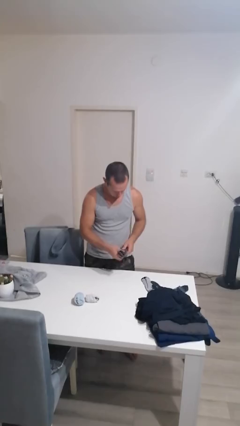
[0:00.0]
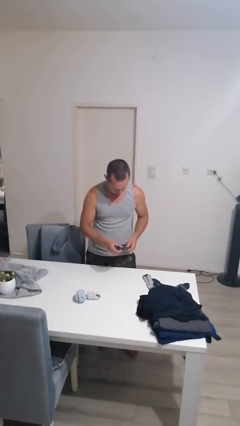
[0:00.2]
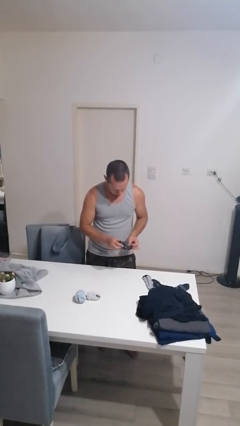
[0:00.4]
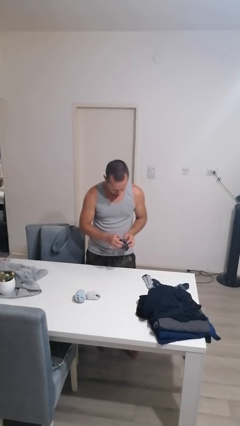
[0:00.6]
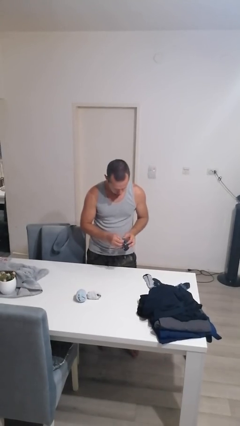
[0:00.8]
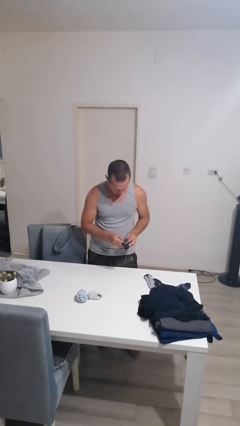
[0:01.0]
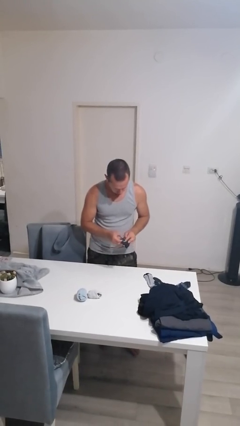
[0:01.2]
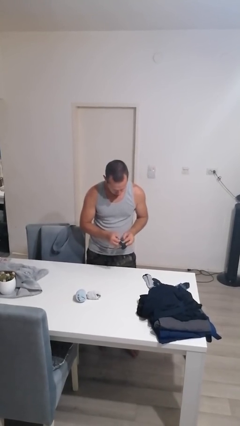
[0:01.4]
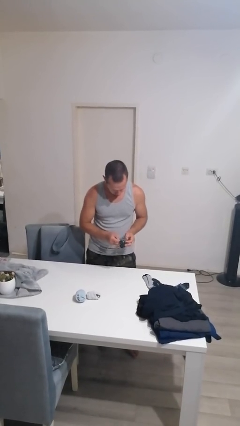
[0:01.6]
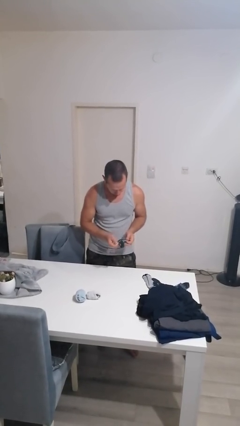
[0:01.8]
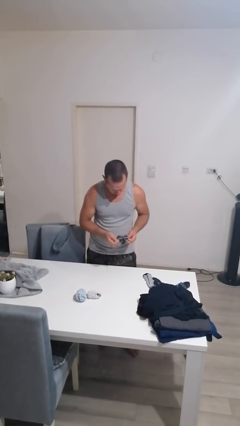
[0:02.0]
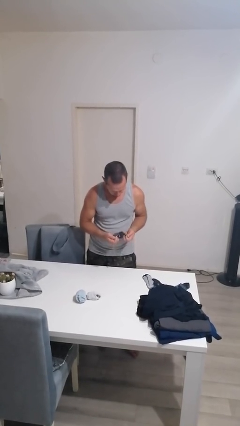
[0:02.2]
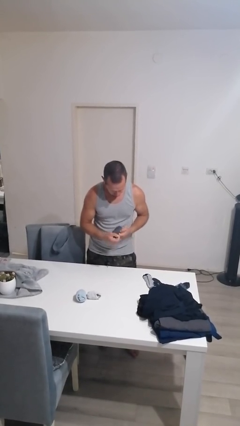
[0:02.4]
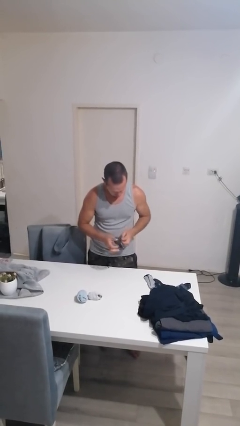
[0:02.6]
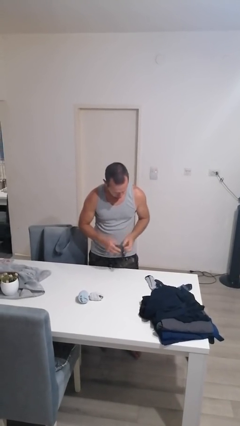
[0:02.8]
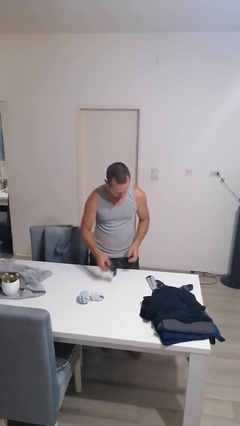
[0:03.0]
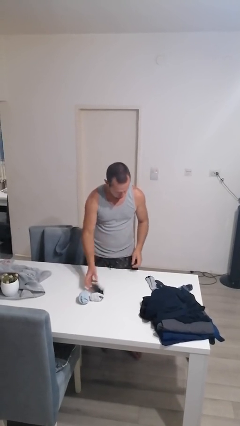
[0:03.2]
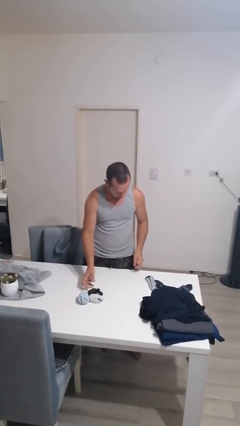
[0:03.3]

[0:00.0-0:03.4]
person folds socks

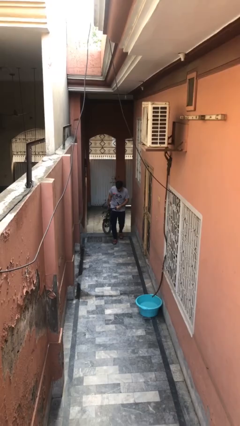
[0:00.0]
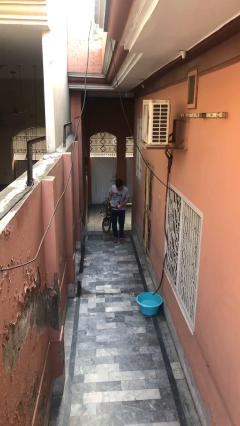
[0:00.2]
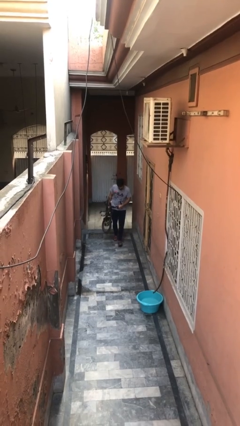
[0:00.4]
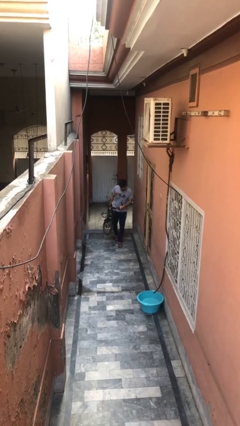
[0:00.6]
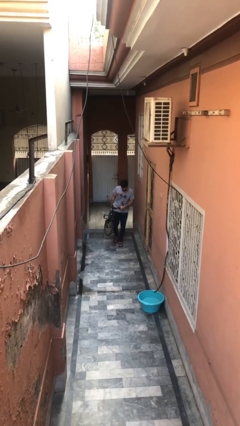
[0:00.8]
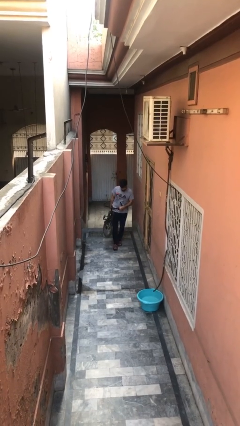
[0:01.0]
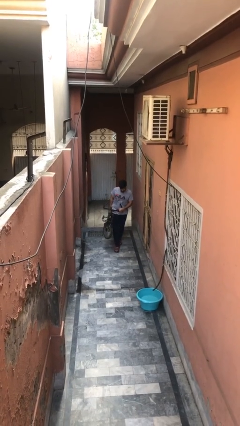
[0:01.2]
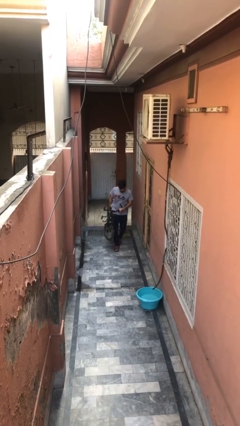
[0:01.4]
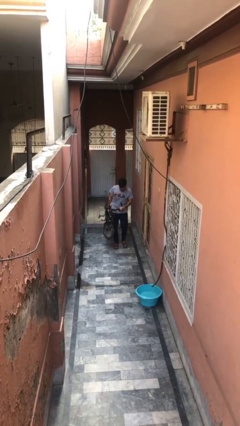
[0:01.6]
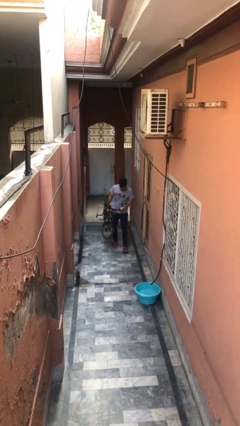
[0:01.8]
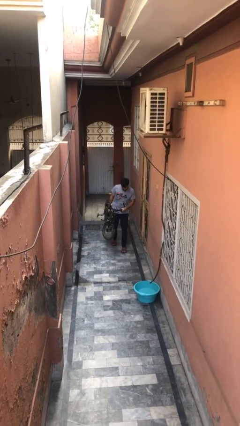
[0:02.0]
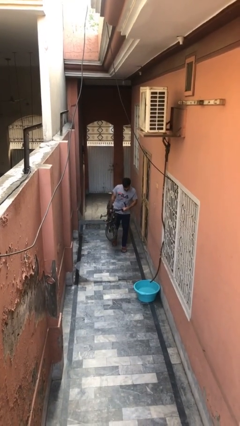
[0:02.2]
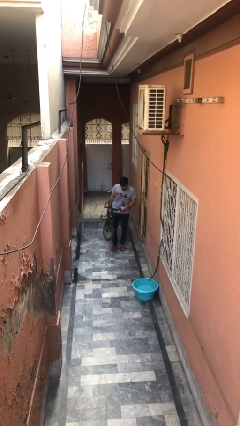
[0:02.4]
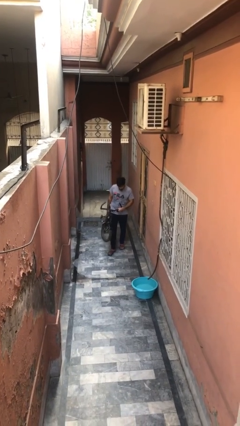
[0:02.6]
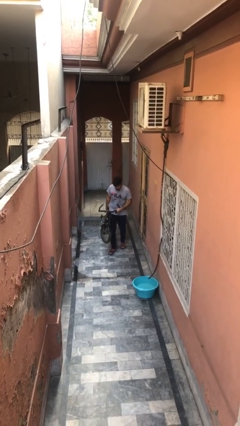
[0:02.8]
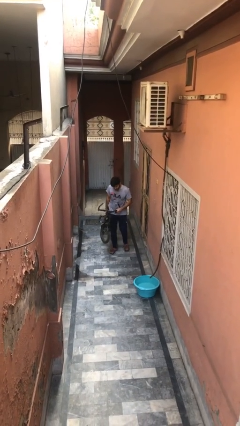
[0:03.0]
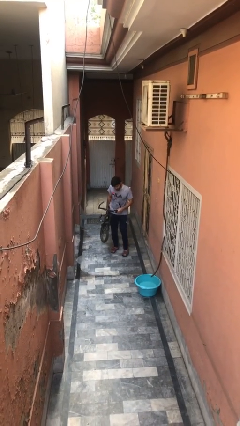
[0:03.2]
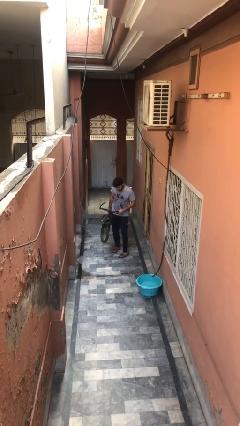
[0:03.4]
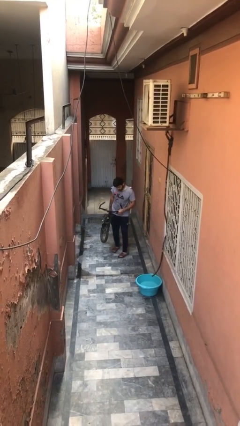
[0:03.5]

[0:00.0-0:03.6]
person carries bicycle

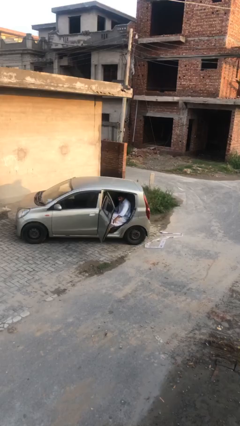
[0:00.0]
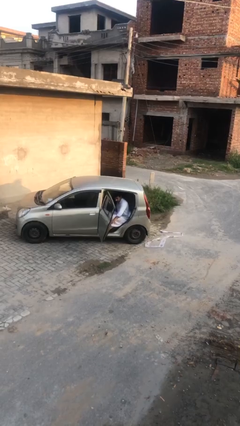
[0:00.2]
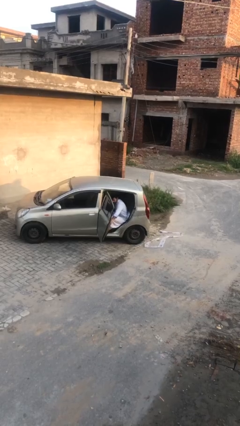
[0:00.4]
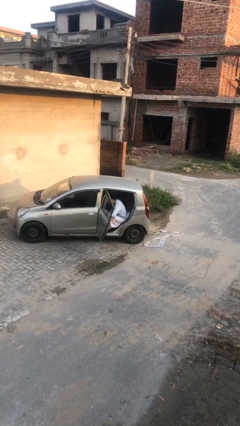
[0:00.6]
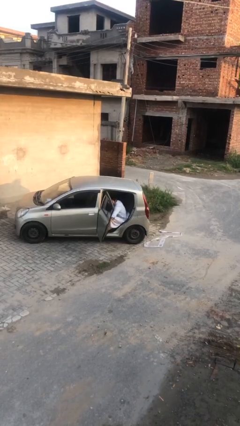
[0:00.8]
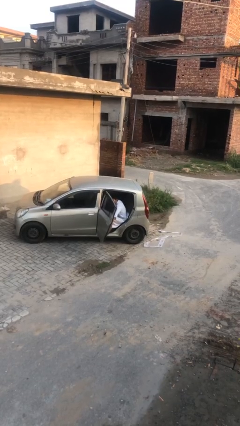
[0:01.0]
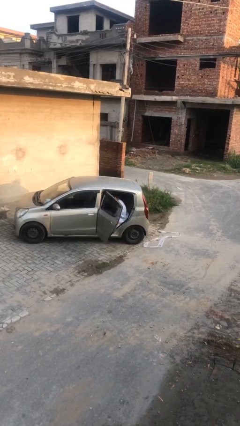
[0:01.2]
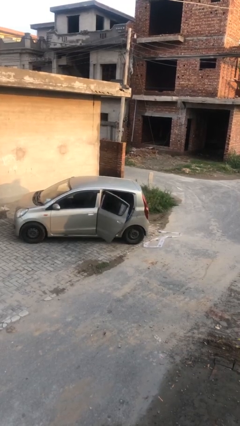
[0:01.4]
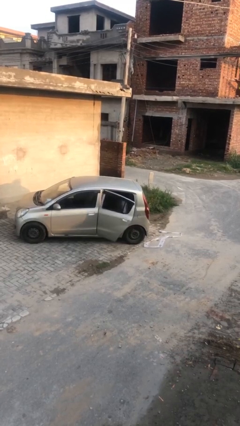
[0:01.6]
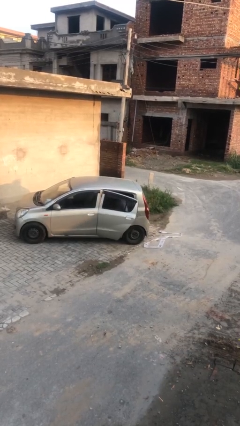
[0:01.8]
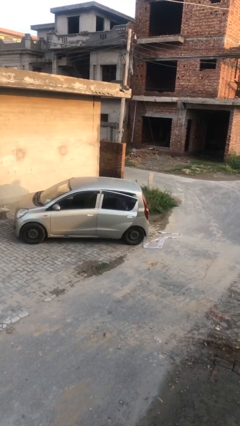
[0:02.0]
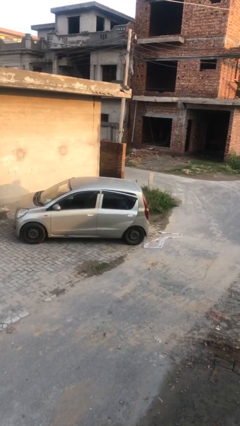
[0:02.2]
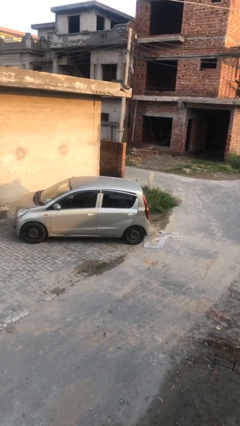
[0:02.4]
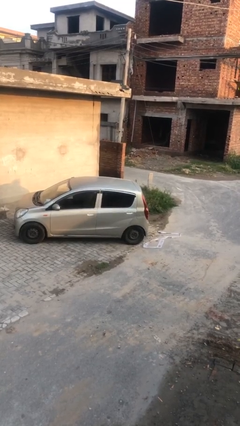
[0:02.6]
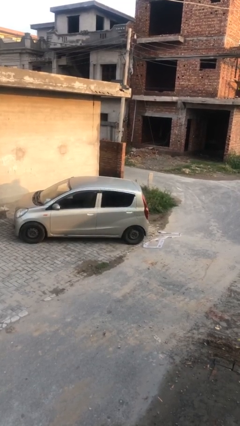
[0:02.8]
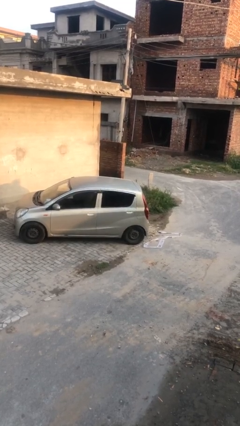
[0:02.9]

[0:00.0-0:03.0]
person closes car door

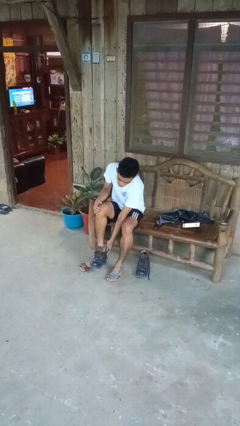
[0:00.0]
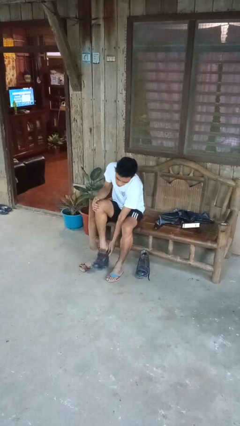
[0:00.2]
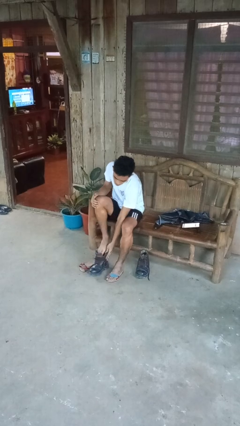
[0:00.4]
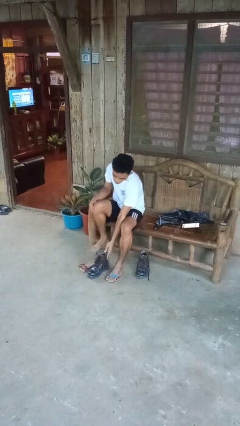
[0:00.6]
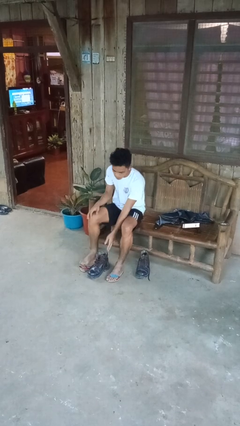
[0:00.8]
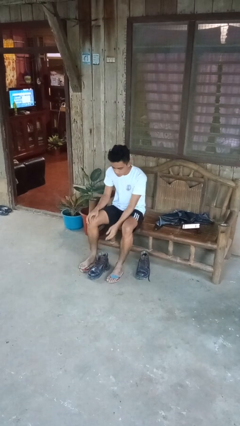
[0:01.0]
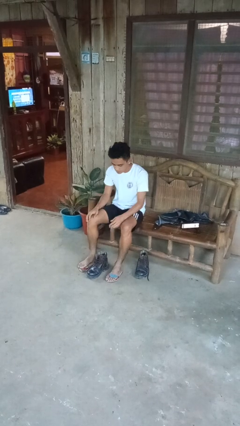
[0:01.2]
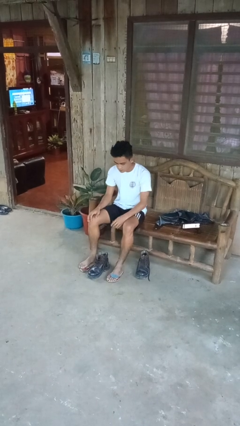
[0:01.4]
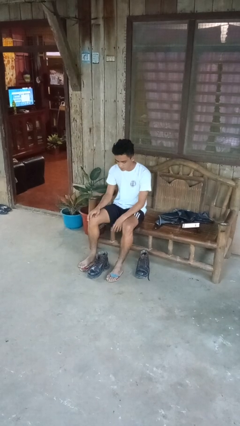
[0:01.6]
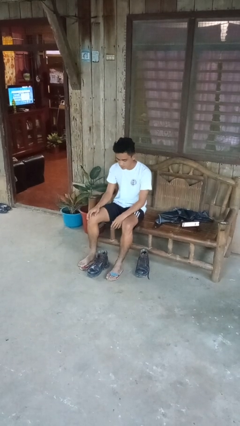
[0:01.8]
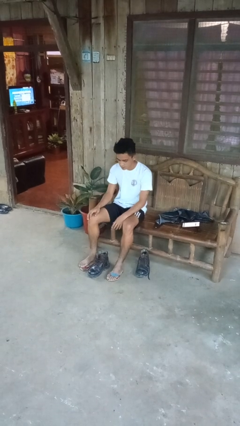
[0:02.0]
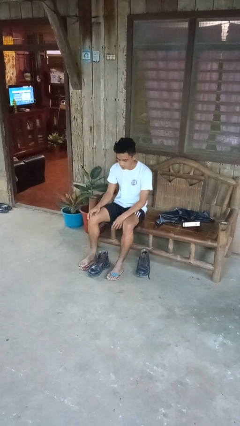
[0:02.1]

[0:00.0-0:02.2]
person takes off boots

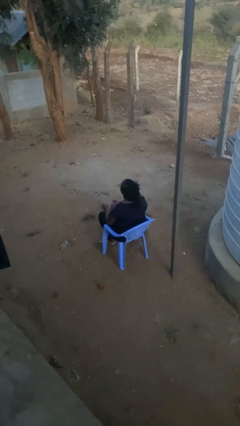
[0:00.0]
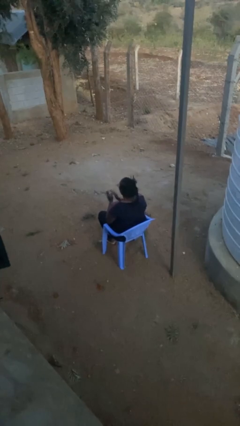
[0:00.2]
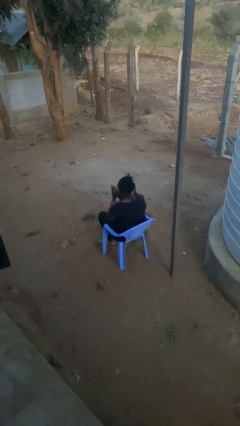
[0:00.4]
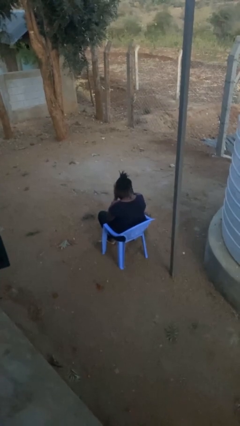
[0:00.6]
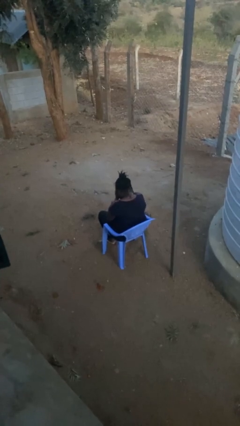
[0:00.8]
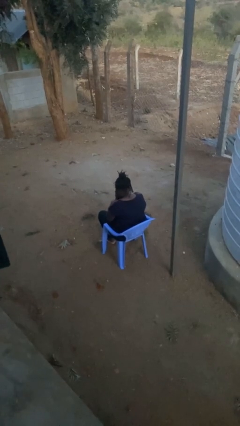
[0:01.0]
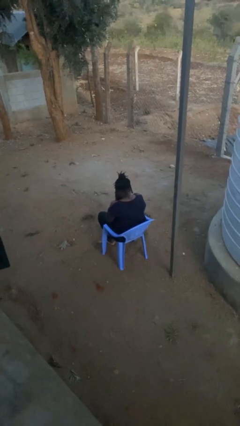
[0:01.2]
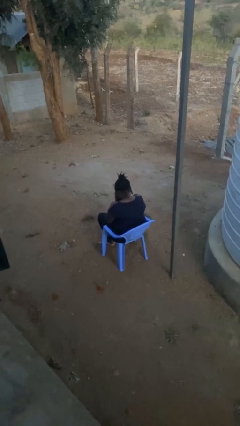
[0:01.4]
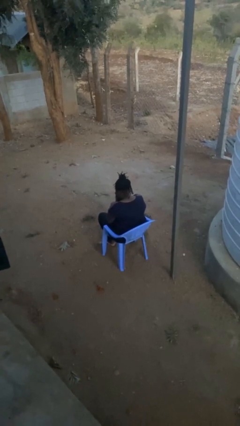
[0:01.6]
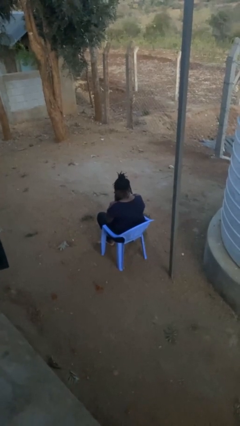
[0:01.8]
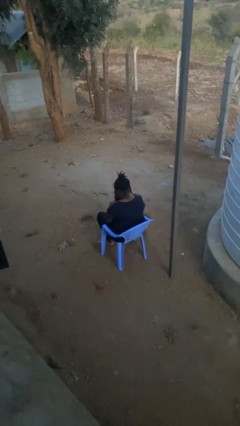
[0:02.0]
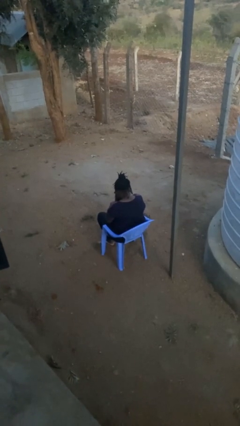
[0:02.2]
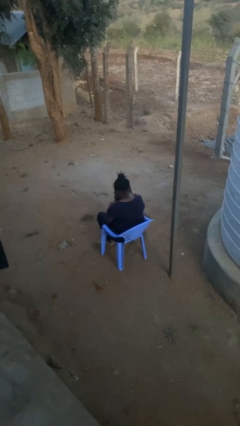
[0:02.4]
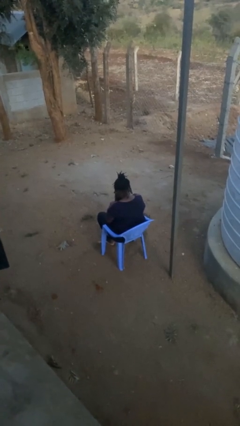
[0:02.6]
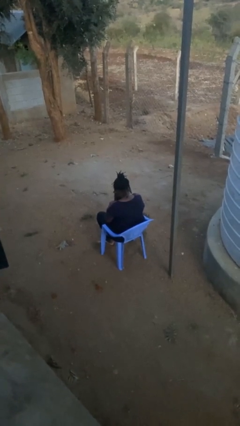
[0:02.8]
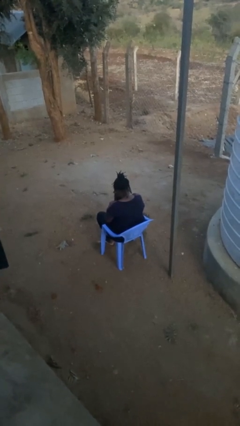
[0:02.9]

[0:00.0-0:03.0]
person prays

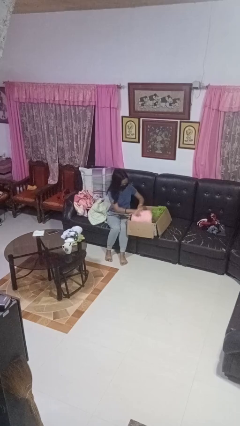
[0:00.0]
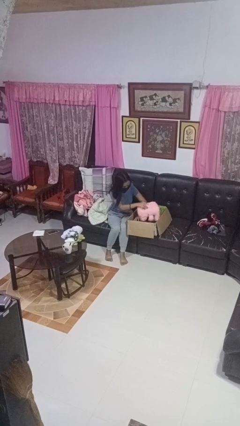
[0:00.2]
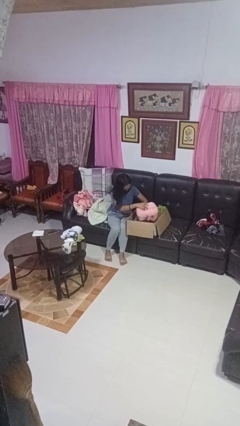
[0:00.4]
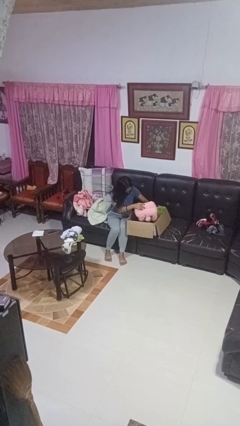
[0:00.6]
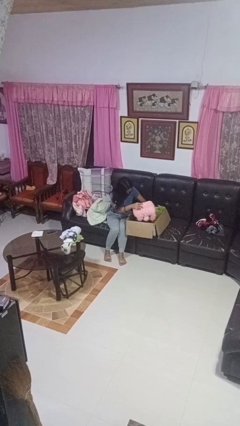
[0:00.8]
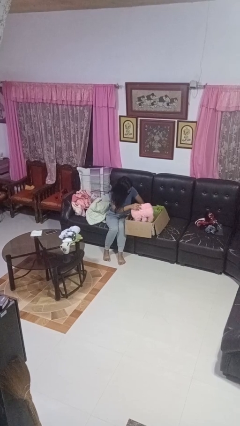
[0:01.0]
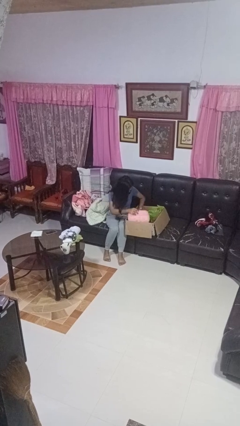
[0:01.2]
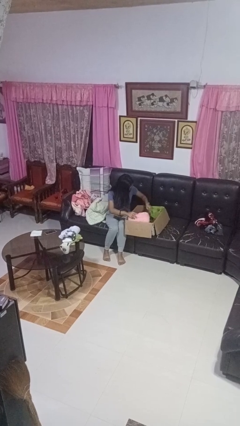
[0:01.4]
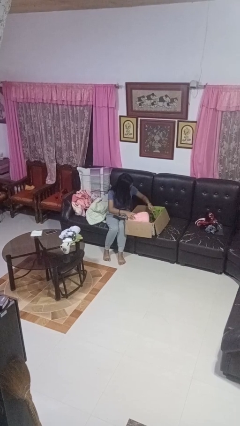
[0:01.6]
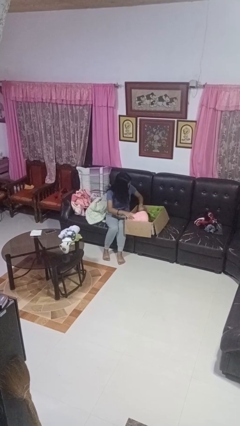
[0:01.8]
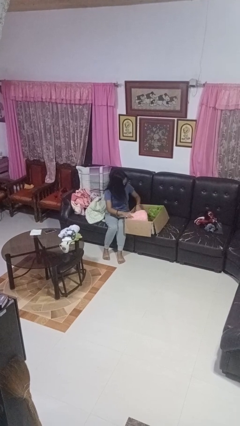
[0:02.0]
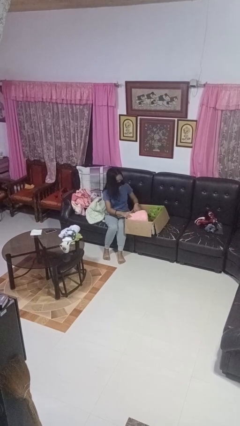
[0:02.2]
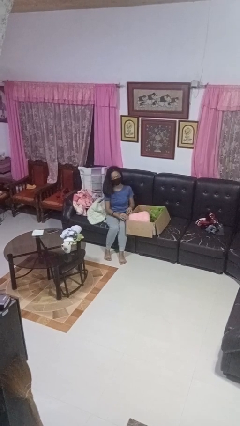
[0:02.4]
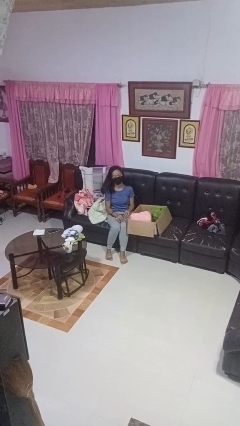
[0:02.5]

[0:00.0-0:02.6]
person searches in box
